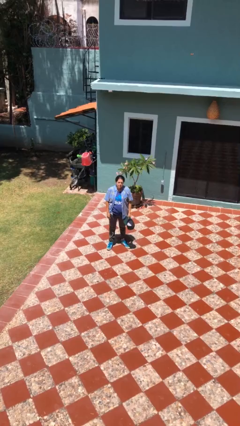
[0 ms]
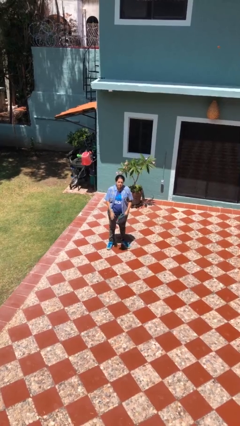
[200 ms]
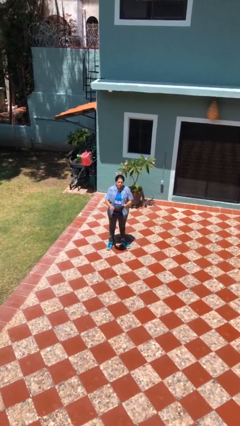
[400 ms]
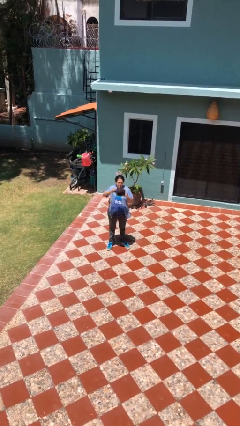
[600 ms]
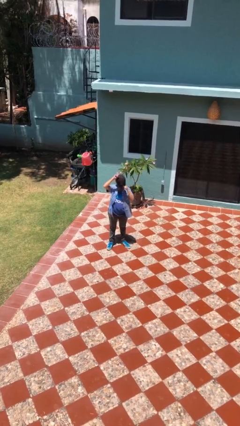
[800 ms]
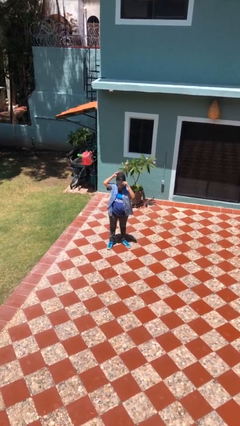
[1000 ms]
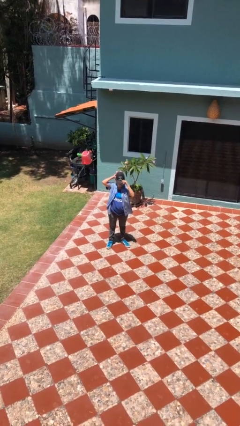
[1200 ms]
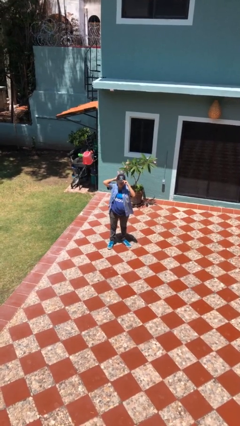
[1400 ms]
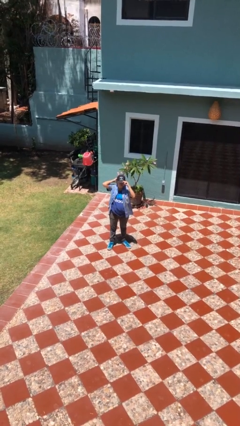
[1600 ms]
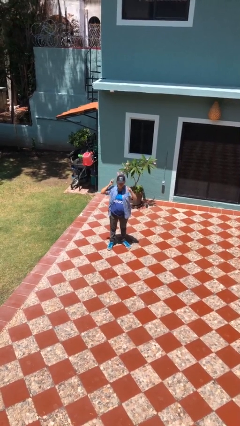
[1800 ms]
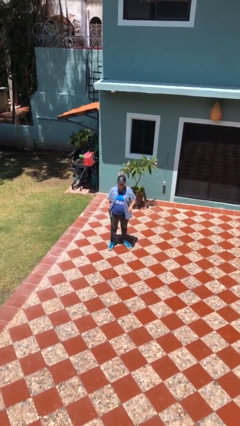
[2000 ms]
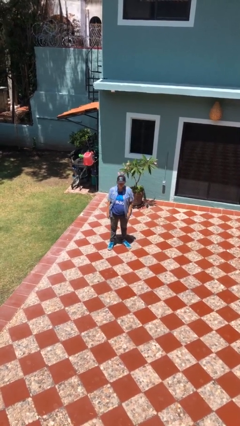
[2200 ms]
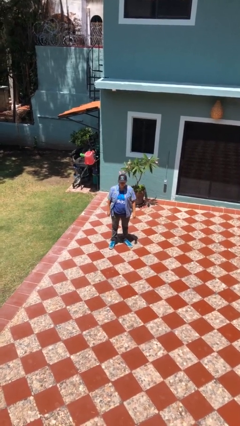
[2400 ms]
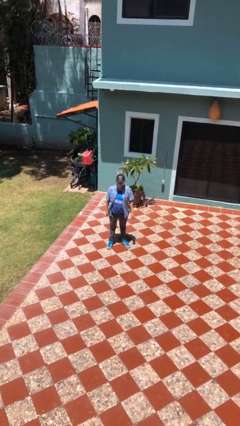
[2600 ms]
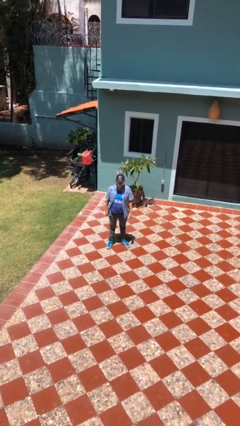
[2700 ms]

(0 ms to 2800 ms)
person puts on hat

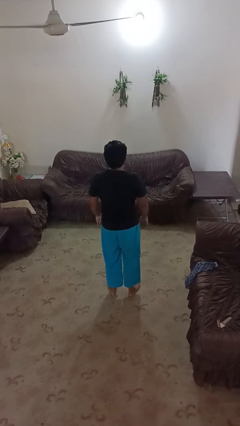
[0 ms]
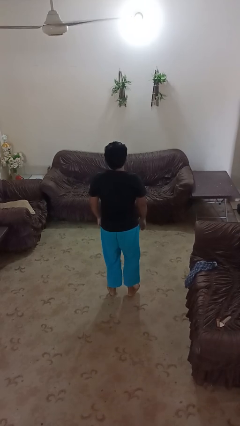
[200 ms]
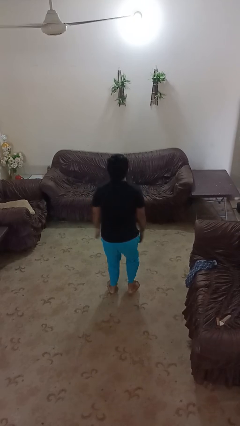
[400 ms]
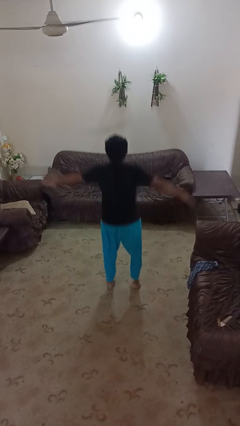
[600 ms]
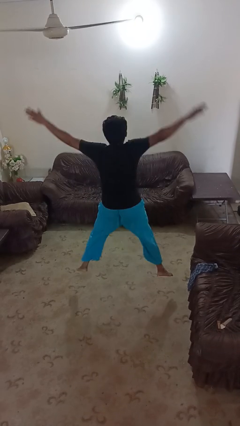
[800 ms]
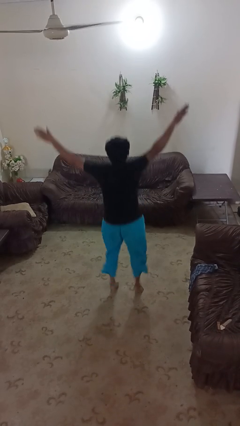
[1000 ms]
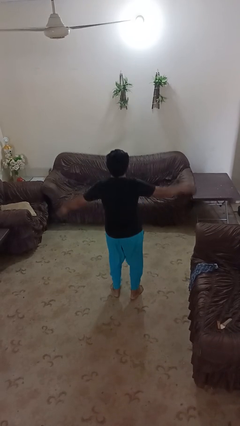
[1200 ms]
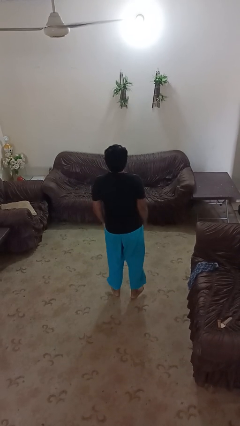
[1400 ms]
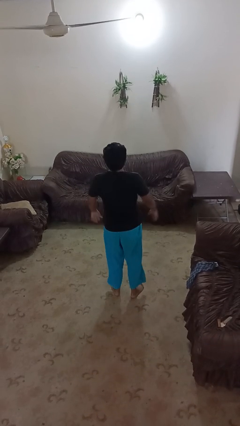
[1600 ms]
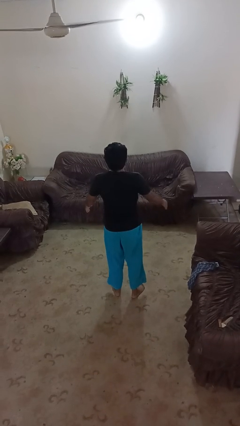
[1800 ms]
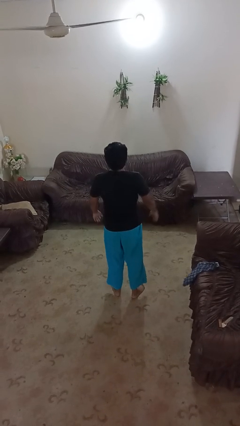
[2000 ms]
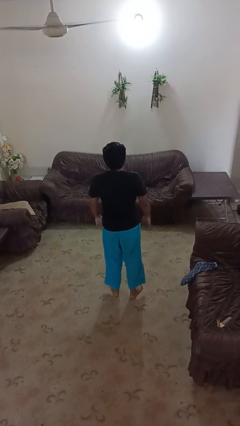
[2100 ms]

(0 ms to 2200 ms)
person exercises with jumping jacks

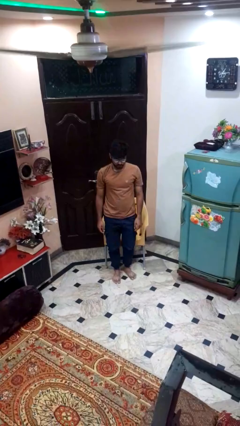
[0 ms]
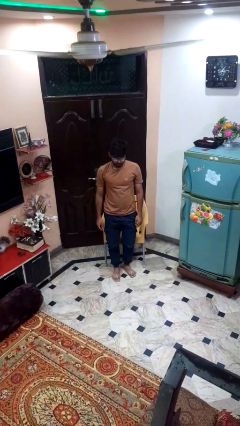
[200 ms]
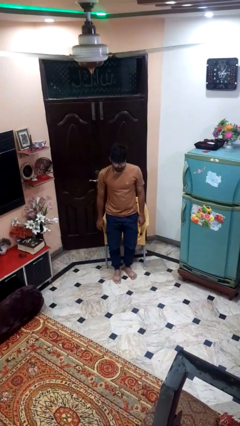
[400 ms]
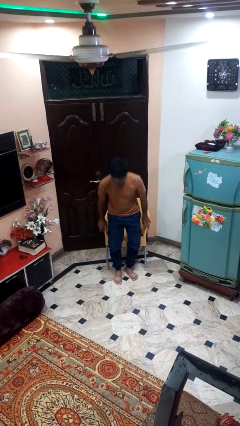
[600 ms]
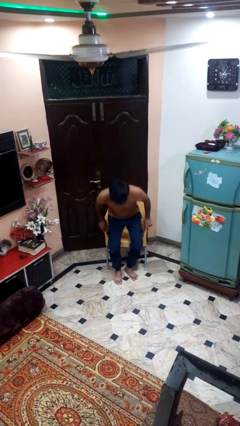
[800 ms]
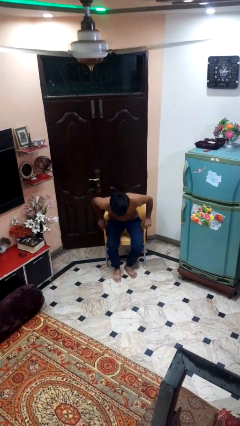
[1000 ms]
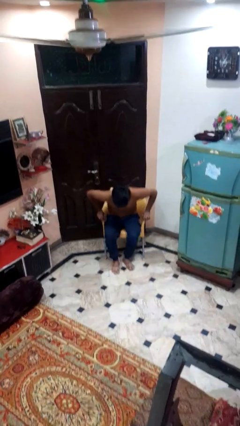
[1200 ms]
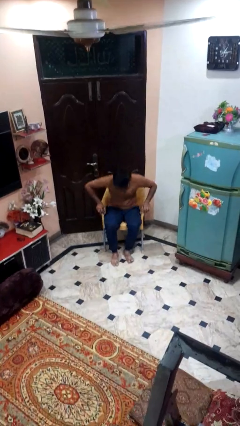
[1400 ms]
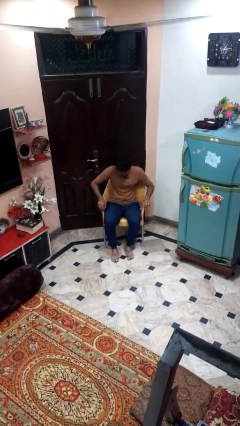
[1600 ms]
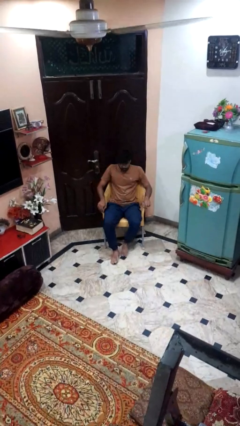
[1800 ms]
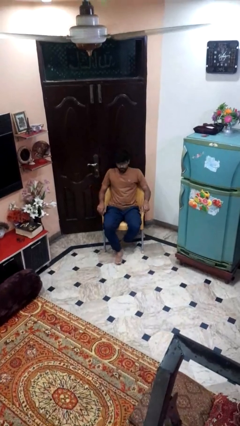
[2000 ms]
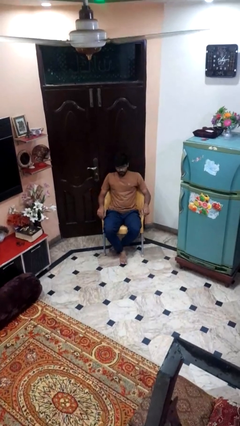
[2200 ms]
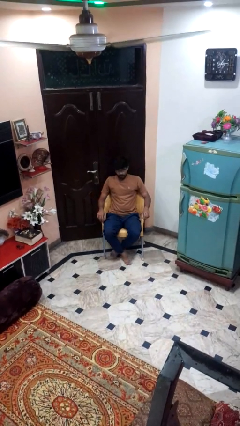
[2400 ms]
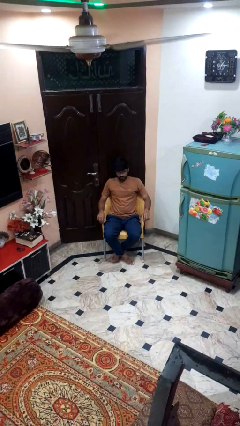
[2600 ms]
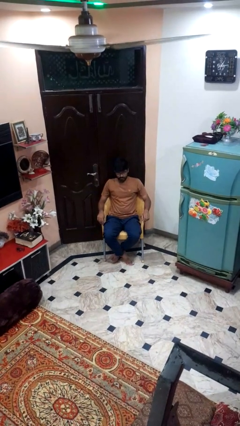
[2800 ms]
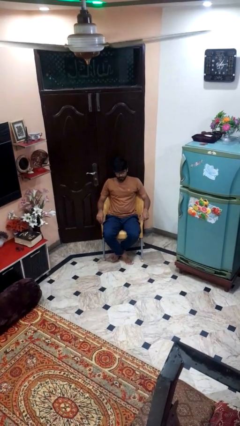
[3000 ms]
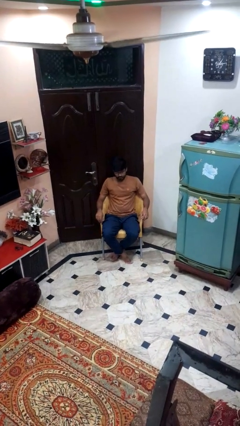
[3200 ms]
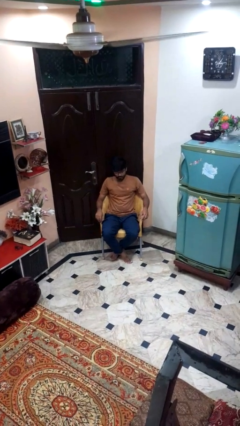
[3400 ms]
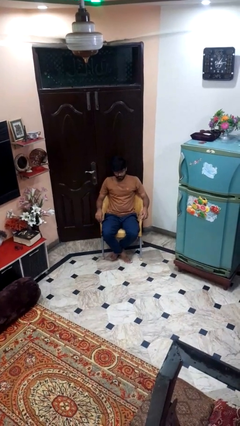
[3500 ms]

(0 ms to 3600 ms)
person sits down

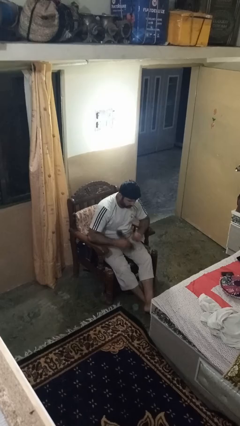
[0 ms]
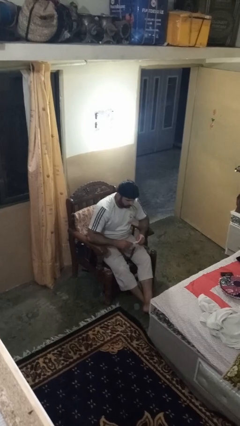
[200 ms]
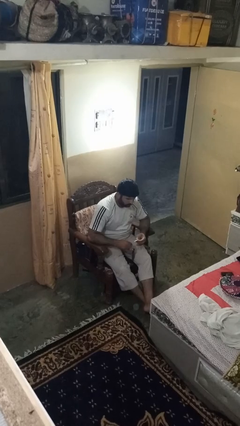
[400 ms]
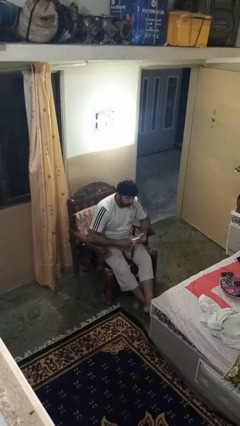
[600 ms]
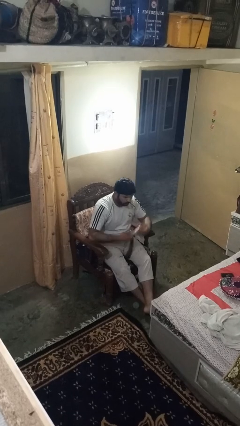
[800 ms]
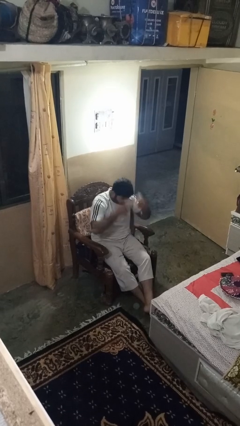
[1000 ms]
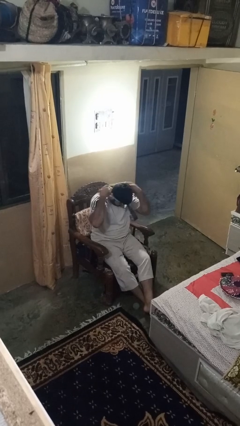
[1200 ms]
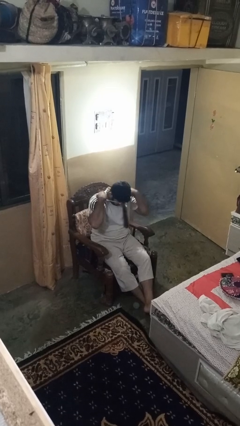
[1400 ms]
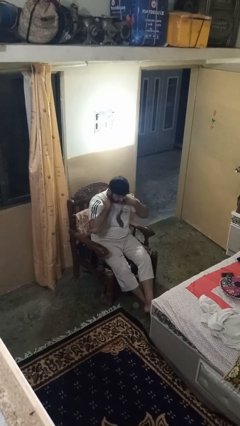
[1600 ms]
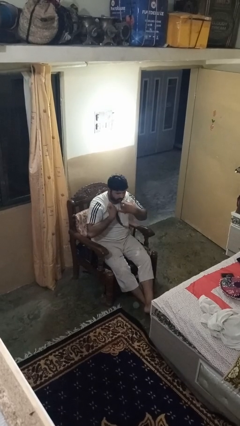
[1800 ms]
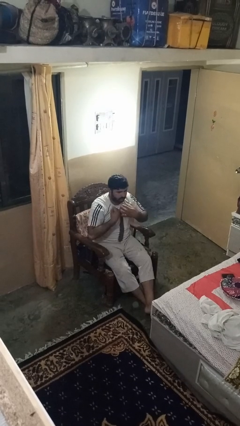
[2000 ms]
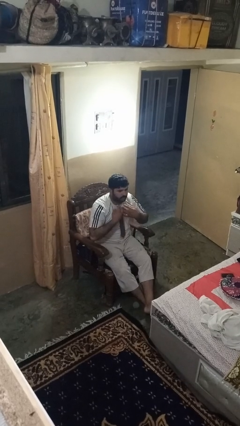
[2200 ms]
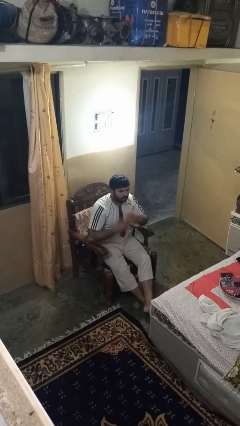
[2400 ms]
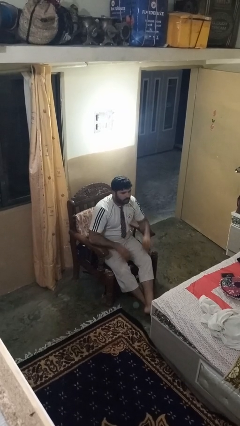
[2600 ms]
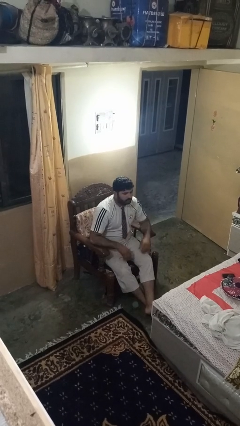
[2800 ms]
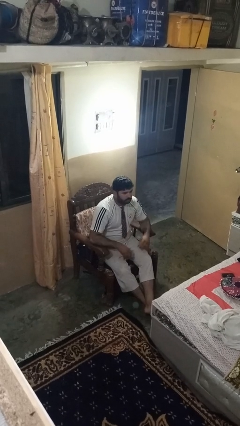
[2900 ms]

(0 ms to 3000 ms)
person puts on necktie

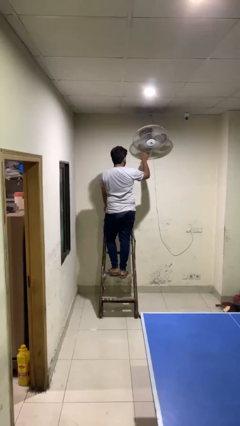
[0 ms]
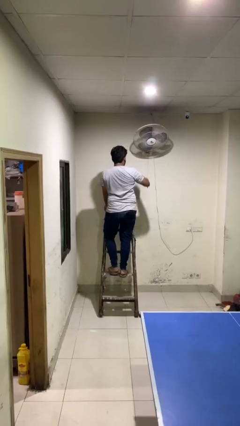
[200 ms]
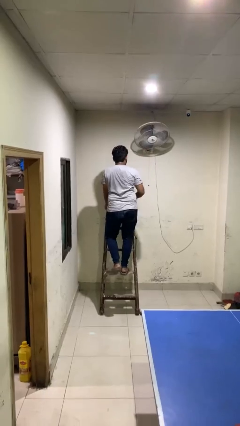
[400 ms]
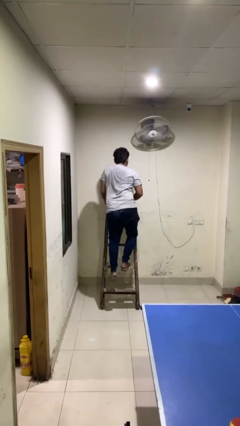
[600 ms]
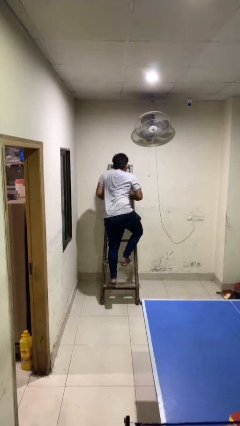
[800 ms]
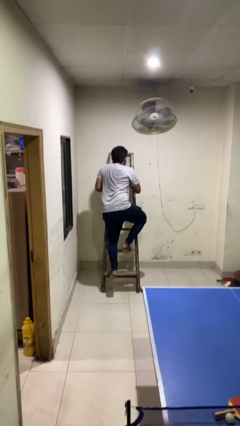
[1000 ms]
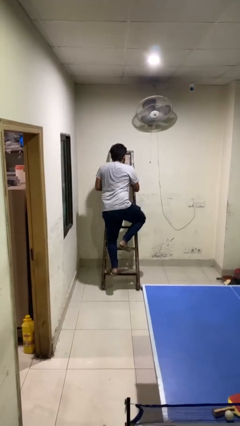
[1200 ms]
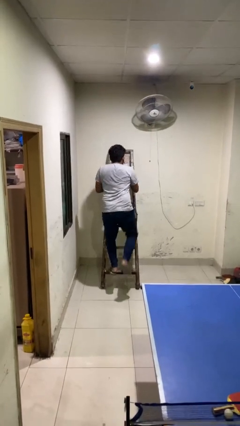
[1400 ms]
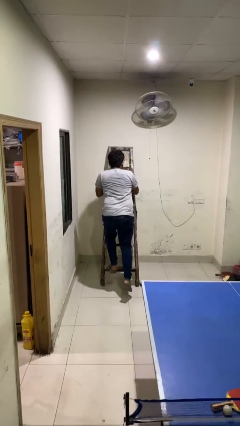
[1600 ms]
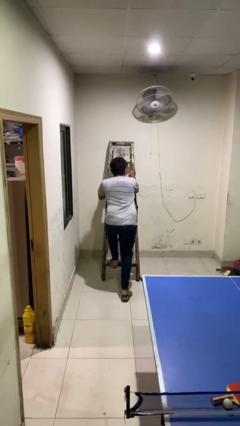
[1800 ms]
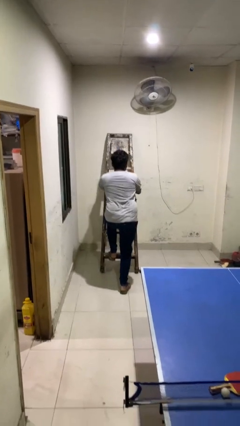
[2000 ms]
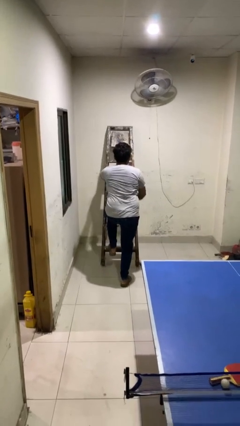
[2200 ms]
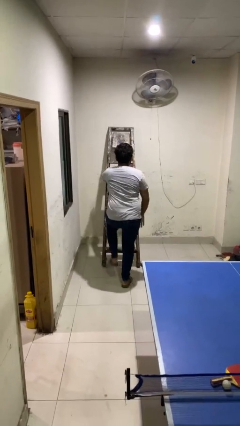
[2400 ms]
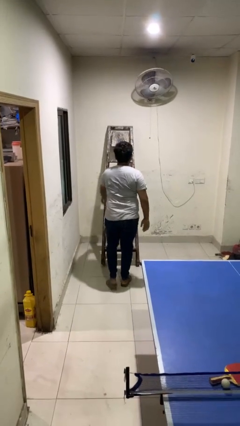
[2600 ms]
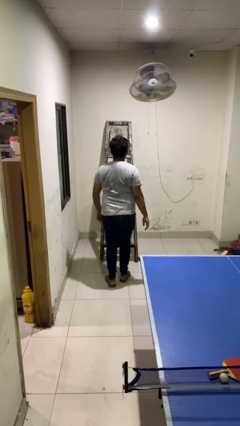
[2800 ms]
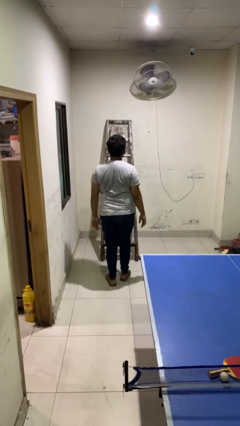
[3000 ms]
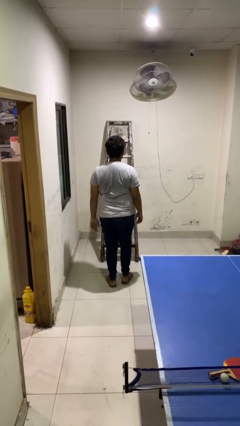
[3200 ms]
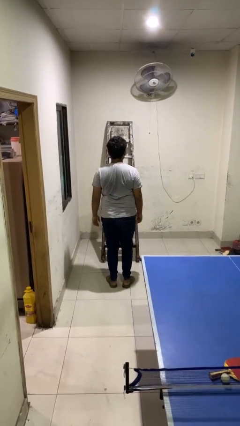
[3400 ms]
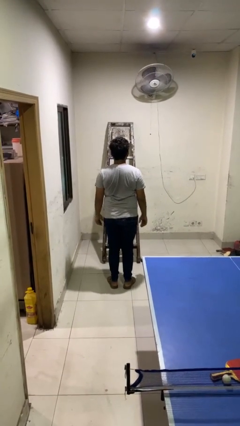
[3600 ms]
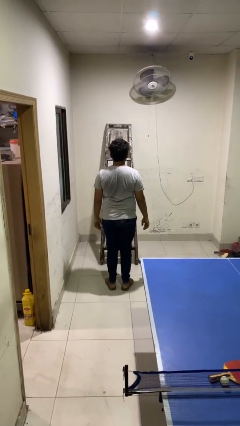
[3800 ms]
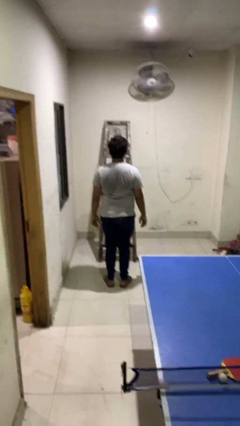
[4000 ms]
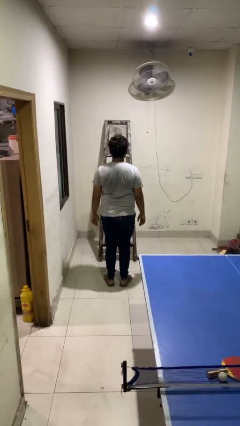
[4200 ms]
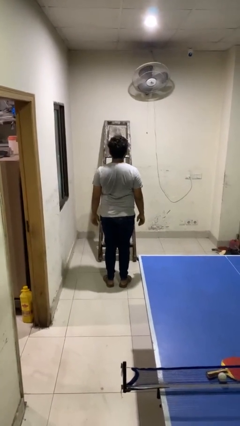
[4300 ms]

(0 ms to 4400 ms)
person climbs down ladder

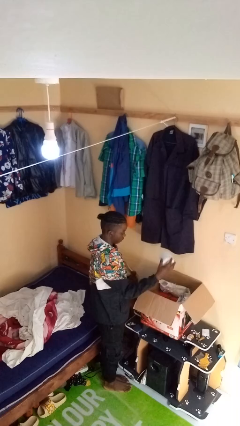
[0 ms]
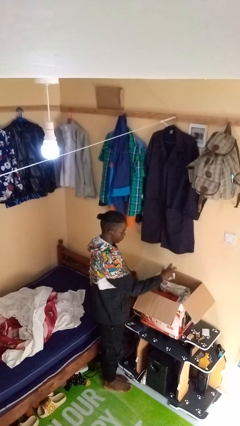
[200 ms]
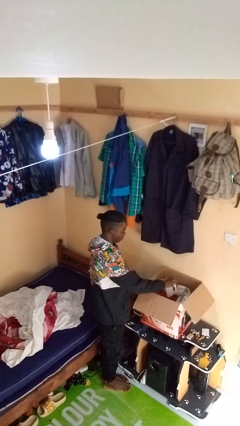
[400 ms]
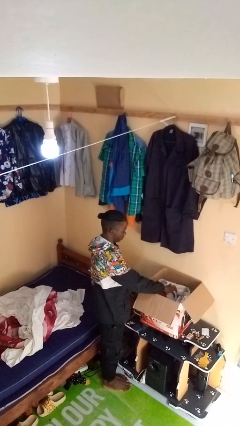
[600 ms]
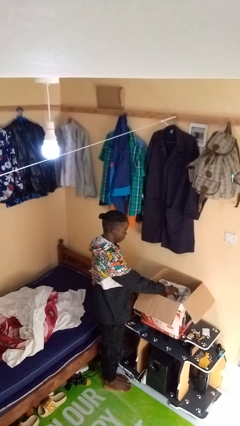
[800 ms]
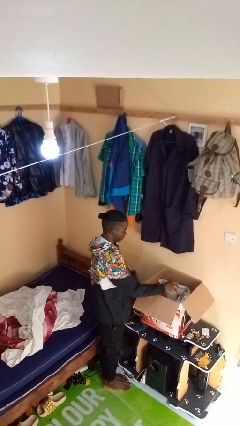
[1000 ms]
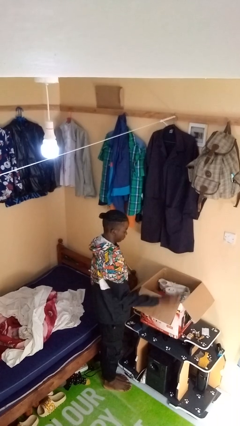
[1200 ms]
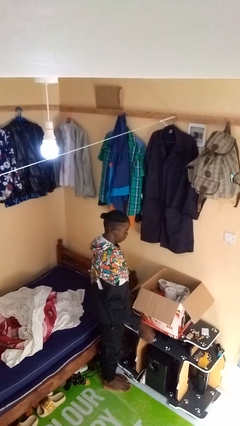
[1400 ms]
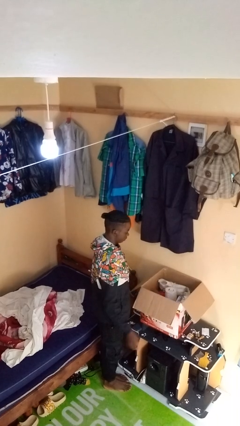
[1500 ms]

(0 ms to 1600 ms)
person puts object into box
